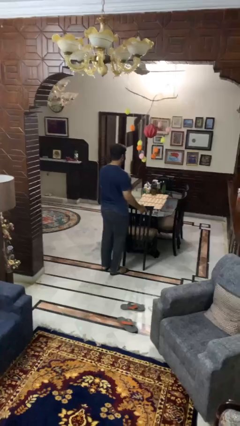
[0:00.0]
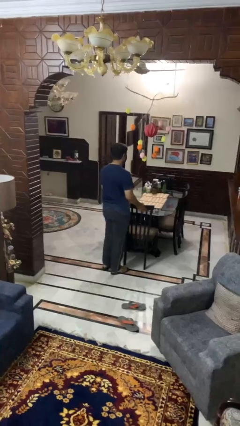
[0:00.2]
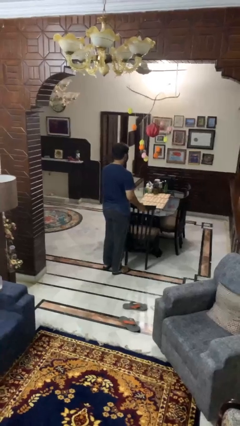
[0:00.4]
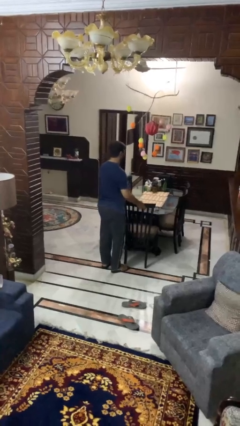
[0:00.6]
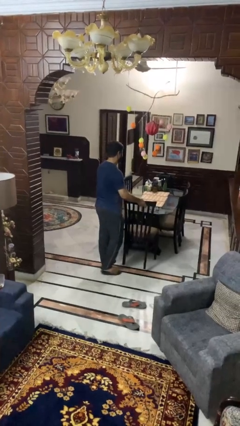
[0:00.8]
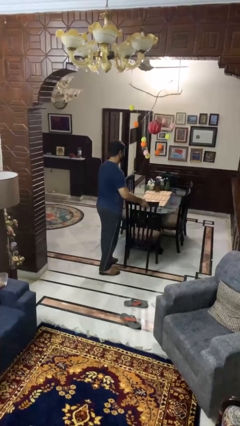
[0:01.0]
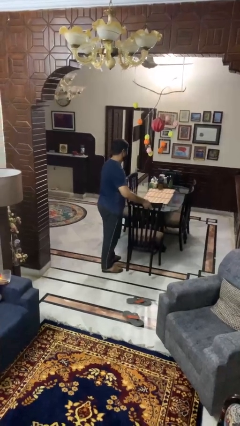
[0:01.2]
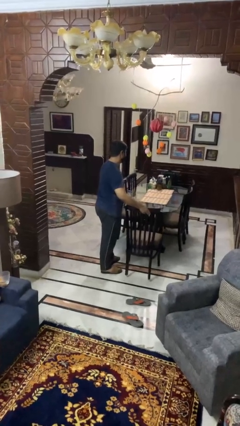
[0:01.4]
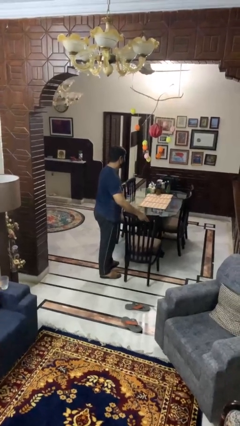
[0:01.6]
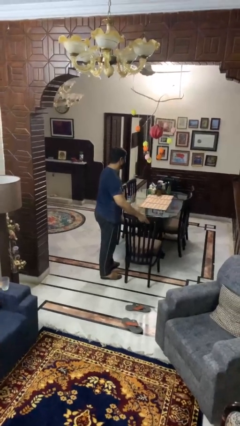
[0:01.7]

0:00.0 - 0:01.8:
person pulls out chair

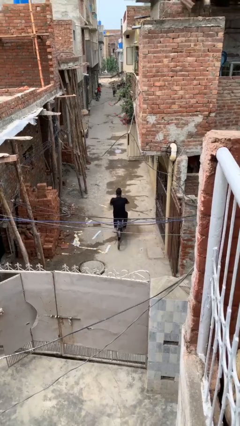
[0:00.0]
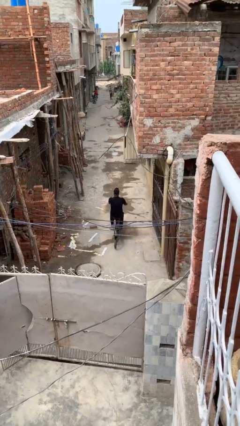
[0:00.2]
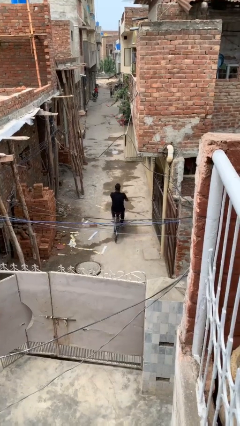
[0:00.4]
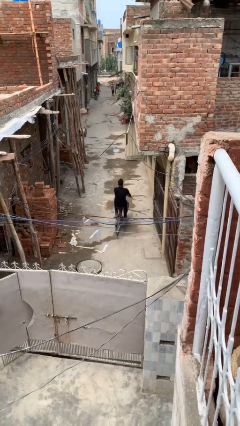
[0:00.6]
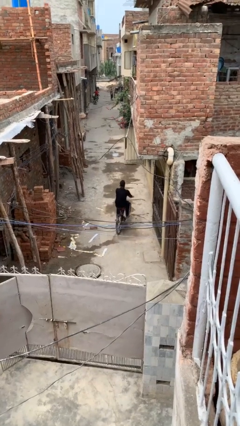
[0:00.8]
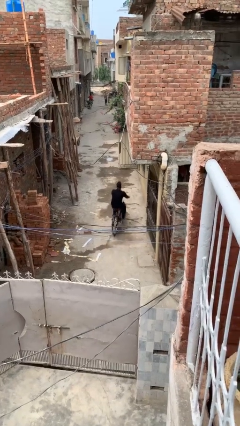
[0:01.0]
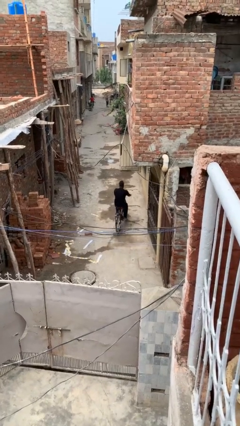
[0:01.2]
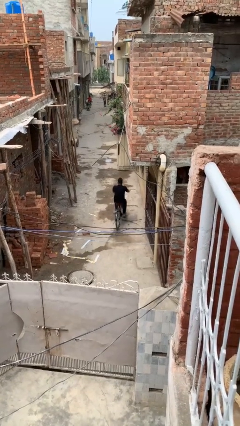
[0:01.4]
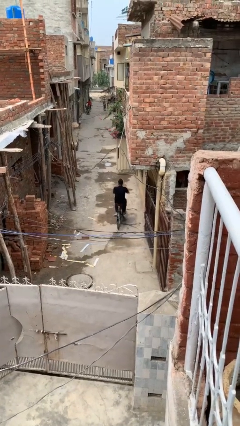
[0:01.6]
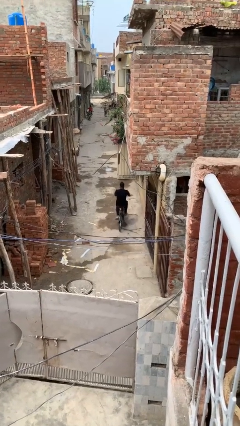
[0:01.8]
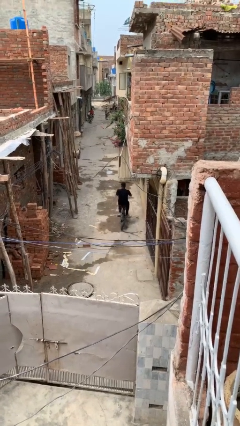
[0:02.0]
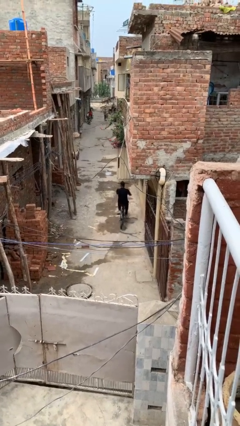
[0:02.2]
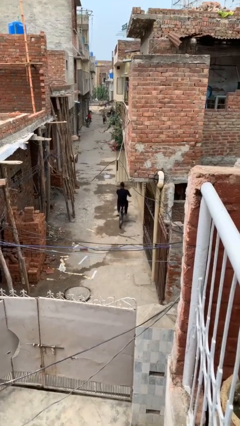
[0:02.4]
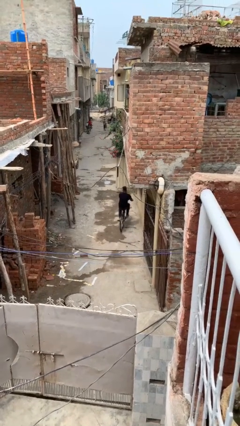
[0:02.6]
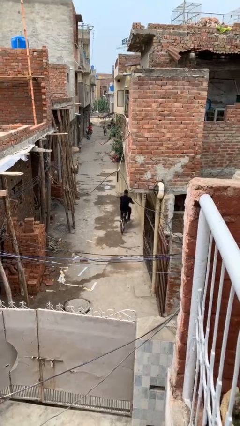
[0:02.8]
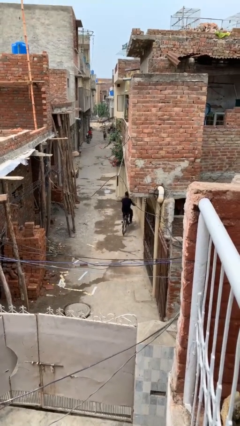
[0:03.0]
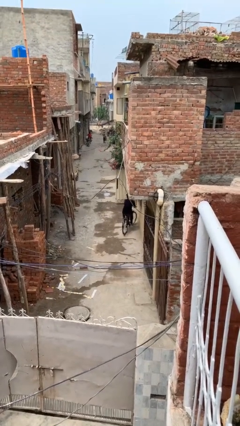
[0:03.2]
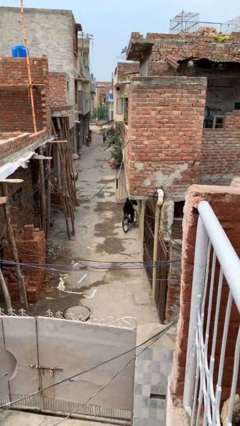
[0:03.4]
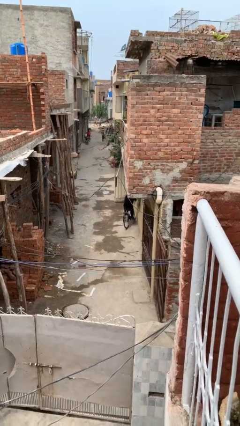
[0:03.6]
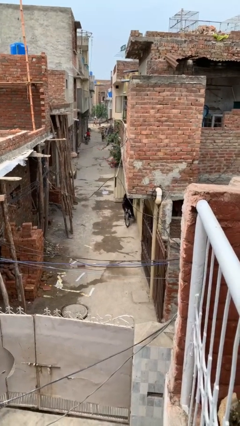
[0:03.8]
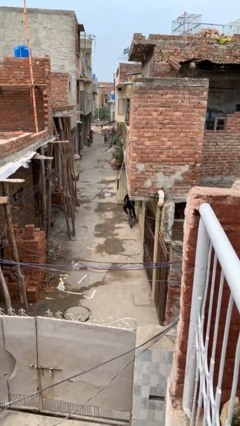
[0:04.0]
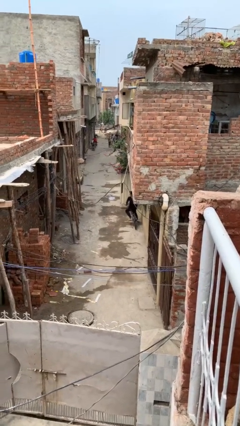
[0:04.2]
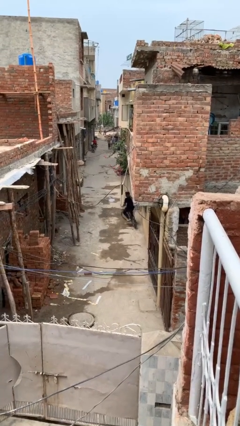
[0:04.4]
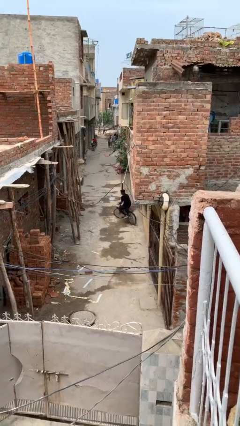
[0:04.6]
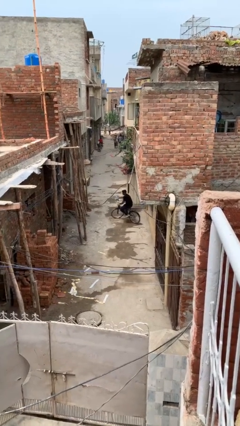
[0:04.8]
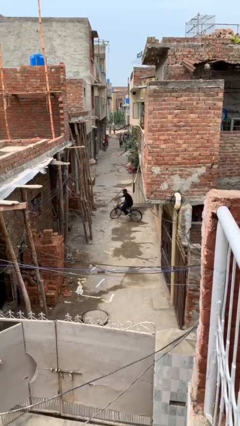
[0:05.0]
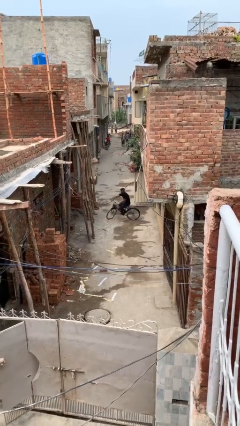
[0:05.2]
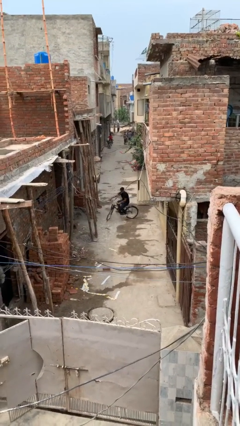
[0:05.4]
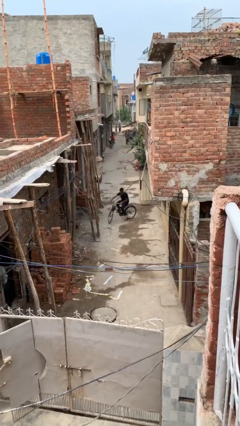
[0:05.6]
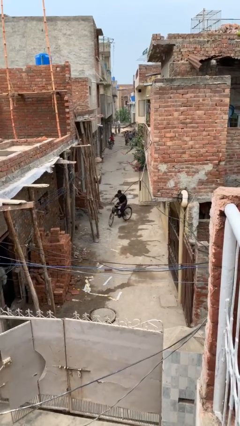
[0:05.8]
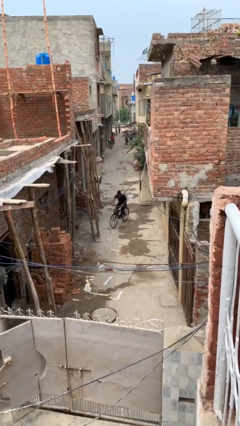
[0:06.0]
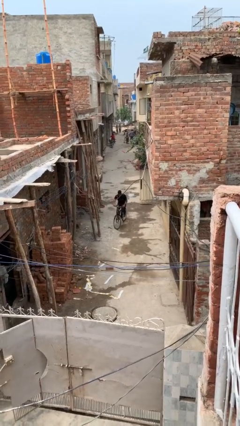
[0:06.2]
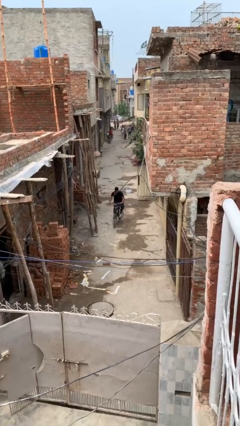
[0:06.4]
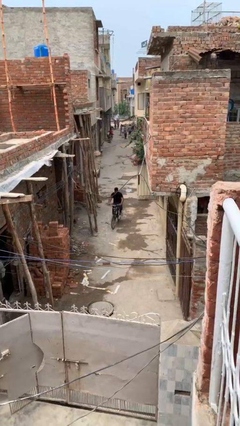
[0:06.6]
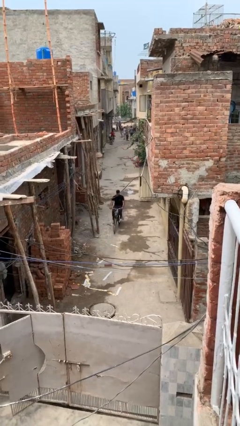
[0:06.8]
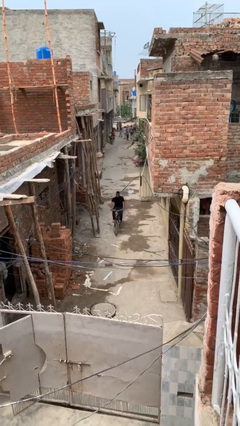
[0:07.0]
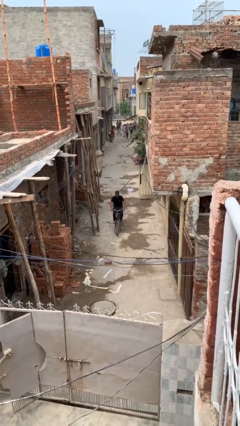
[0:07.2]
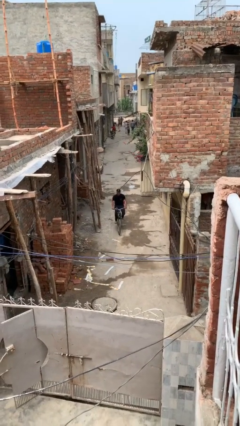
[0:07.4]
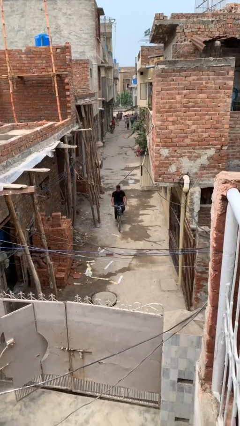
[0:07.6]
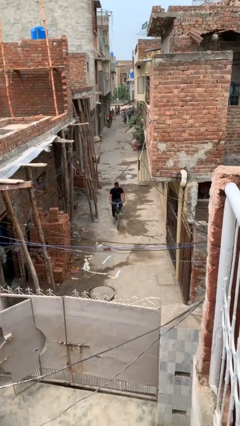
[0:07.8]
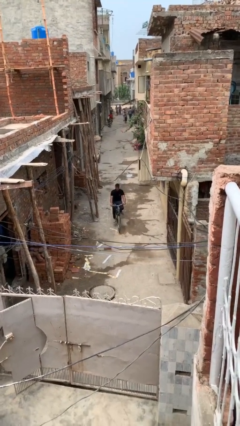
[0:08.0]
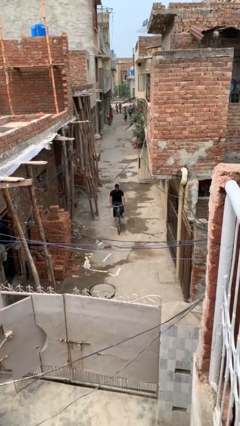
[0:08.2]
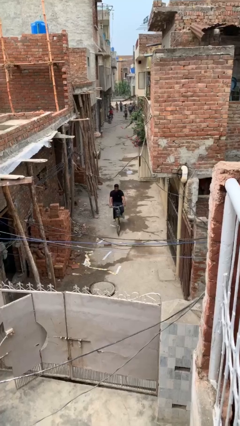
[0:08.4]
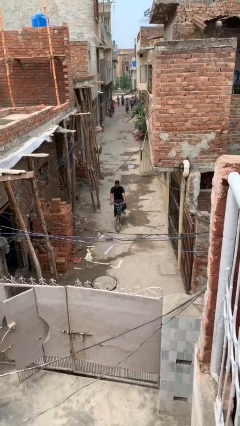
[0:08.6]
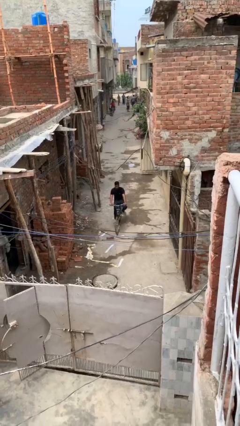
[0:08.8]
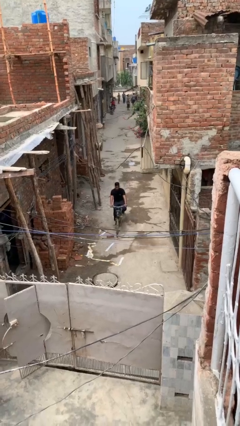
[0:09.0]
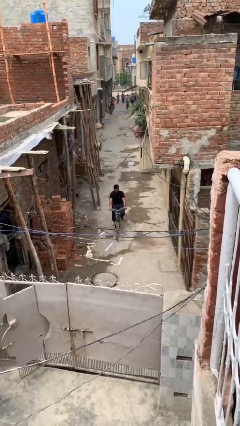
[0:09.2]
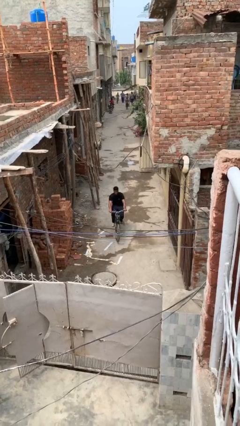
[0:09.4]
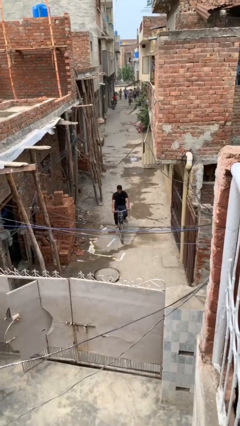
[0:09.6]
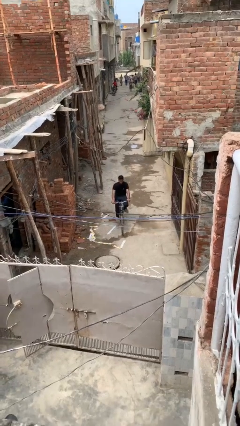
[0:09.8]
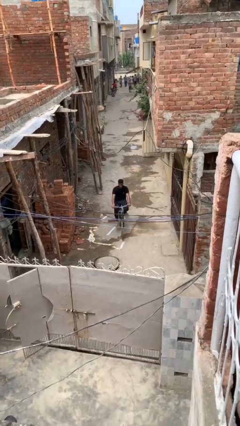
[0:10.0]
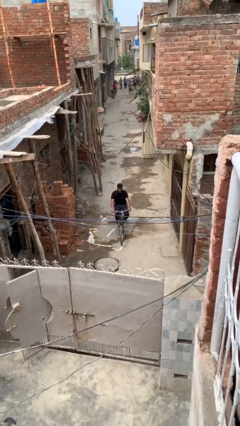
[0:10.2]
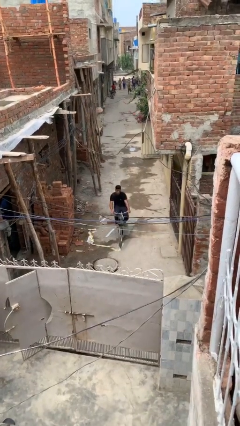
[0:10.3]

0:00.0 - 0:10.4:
person rides bicycle

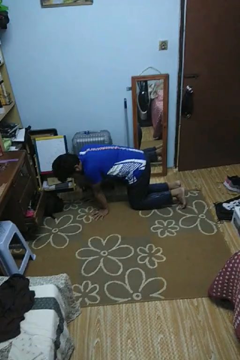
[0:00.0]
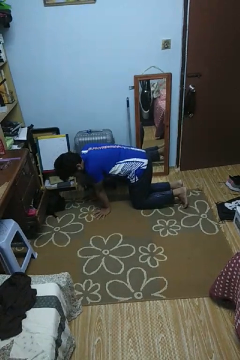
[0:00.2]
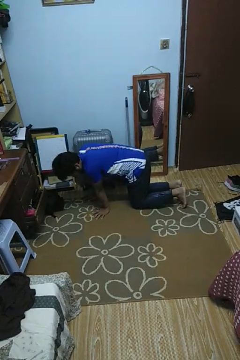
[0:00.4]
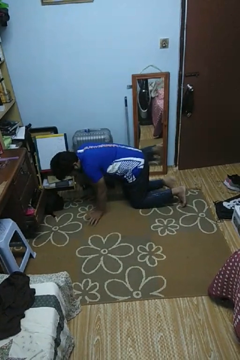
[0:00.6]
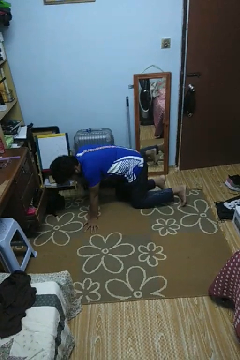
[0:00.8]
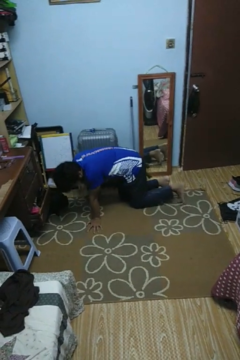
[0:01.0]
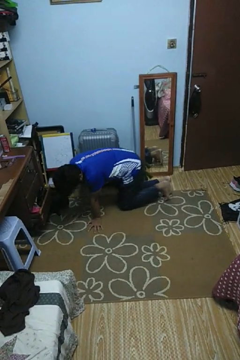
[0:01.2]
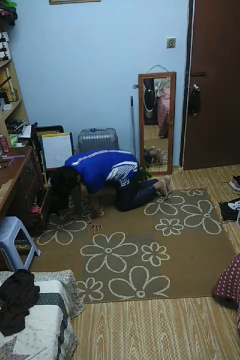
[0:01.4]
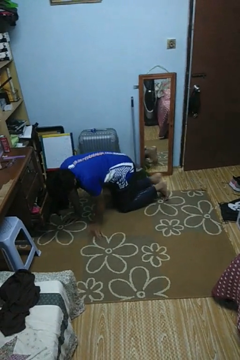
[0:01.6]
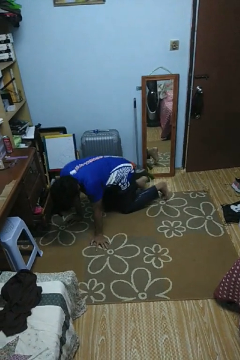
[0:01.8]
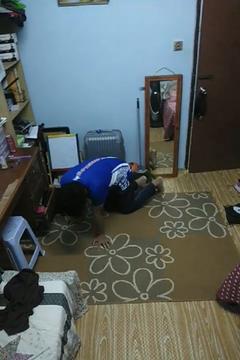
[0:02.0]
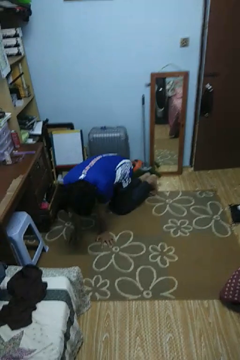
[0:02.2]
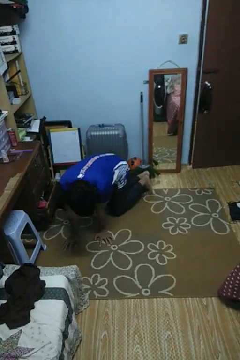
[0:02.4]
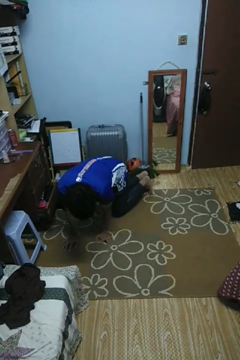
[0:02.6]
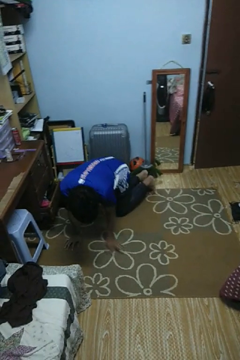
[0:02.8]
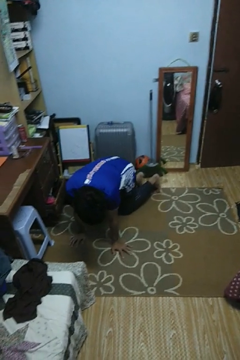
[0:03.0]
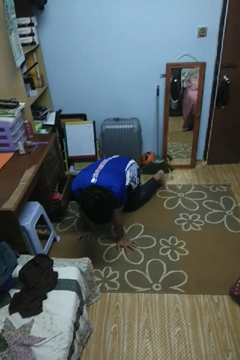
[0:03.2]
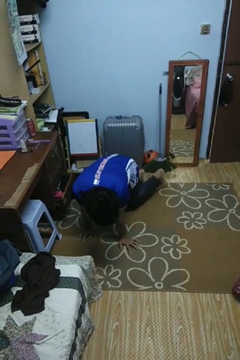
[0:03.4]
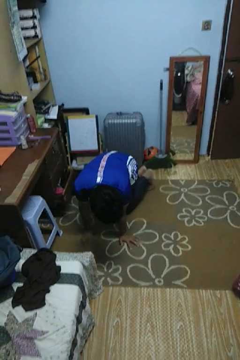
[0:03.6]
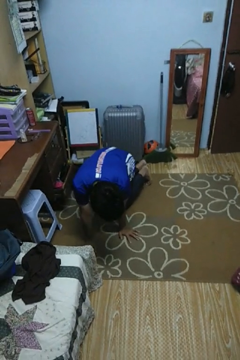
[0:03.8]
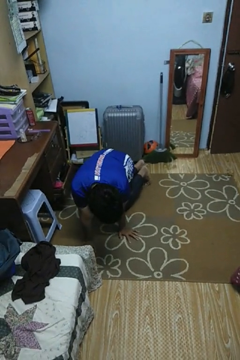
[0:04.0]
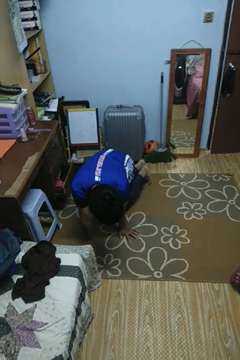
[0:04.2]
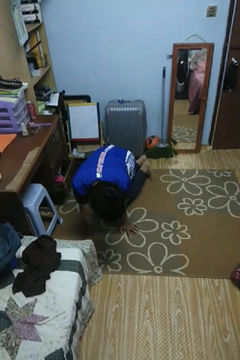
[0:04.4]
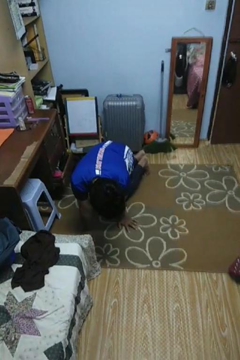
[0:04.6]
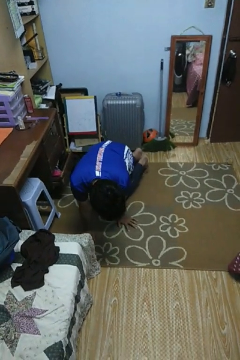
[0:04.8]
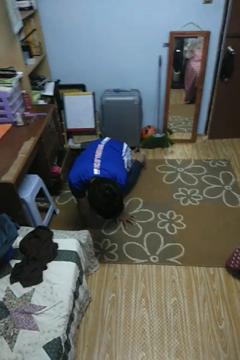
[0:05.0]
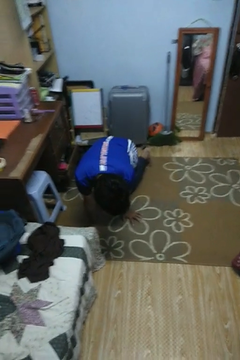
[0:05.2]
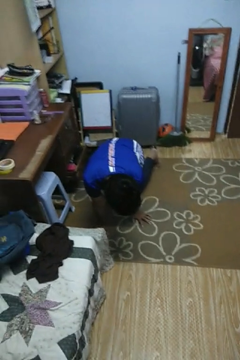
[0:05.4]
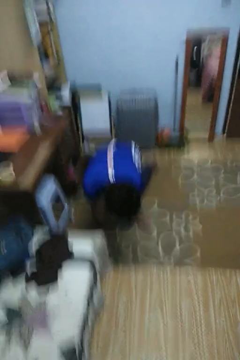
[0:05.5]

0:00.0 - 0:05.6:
person crawls

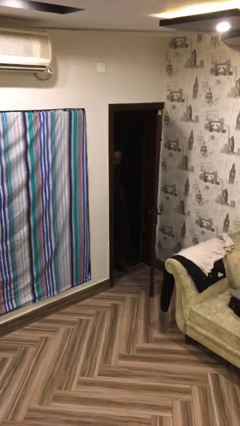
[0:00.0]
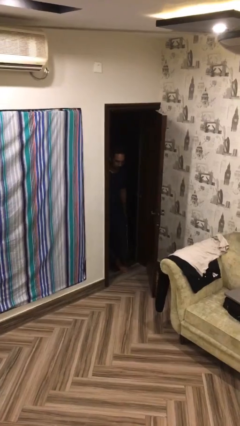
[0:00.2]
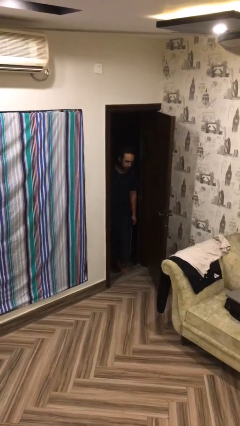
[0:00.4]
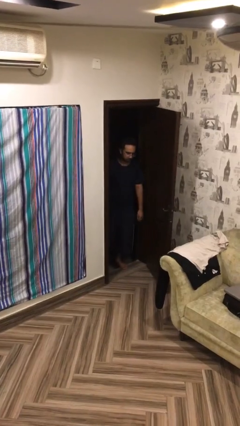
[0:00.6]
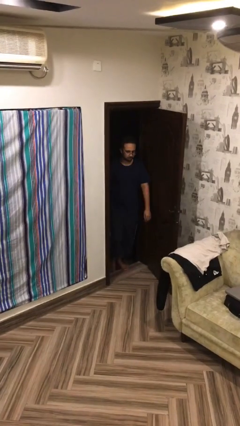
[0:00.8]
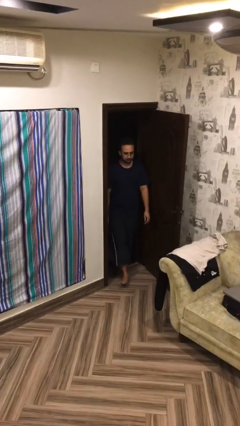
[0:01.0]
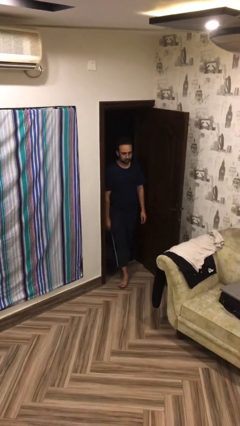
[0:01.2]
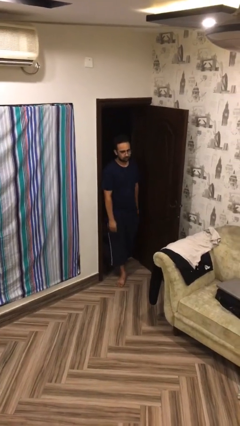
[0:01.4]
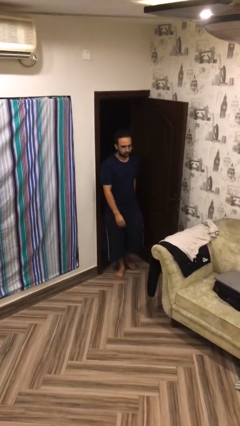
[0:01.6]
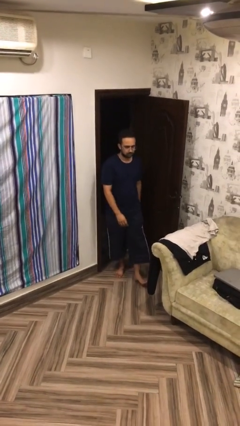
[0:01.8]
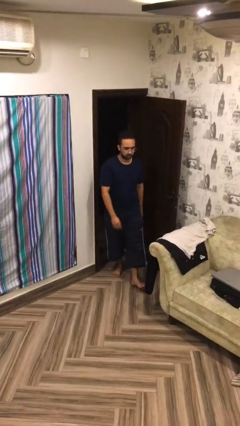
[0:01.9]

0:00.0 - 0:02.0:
person enters scene through structure
